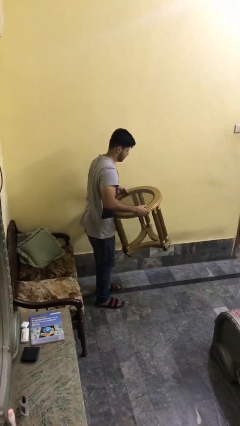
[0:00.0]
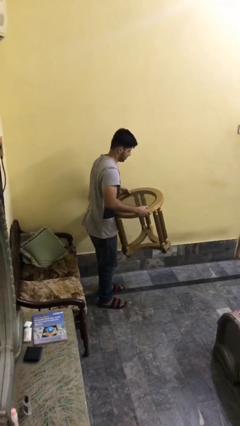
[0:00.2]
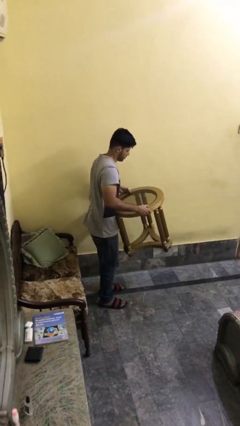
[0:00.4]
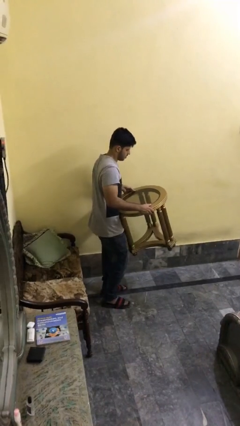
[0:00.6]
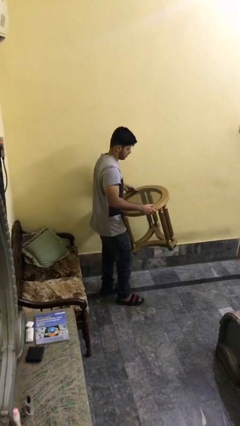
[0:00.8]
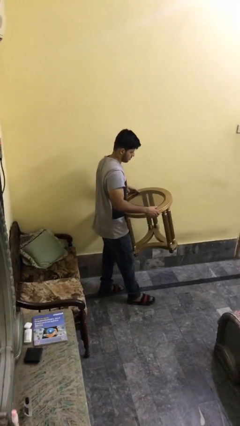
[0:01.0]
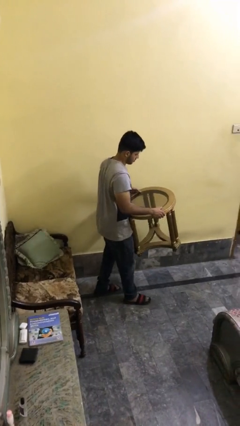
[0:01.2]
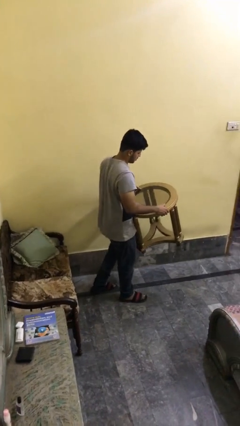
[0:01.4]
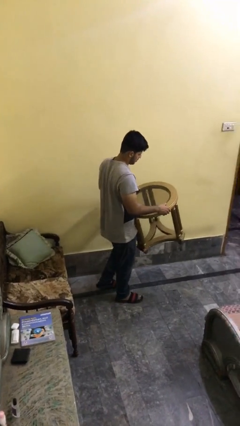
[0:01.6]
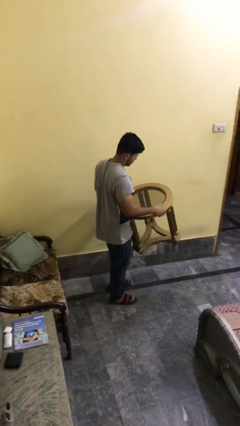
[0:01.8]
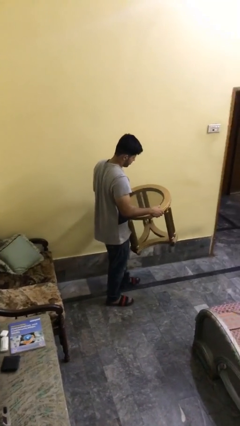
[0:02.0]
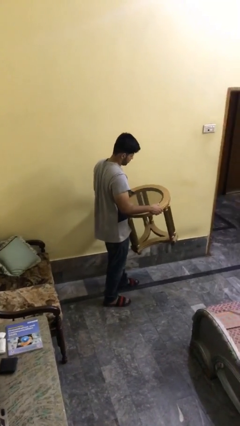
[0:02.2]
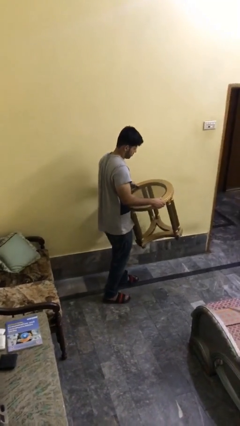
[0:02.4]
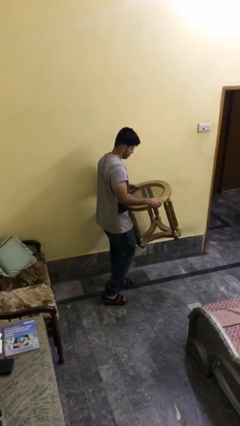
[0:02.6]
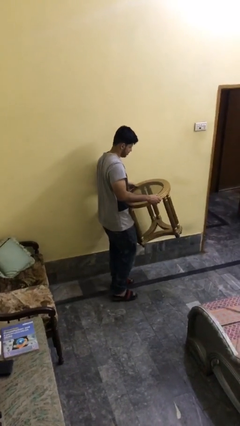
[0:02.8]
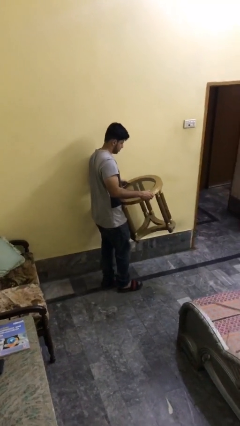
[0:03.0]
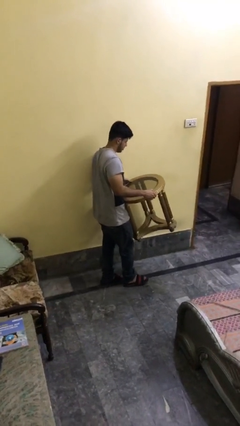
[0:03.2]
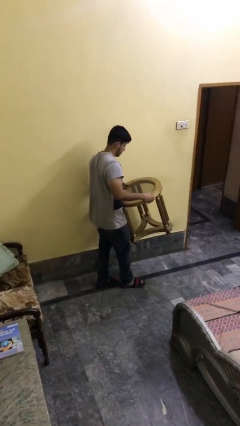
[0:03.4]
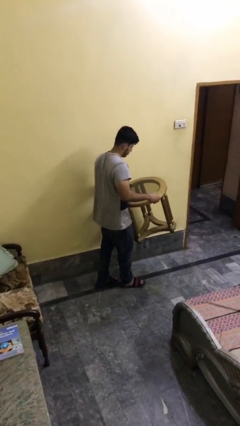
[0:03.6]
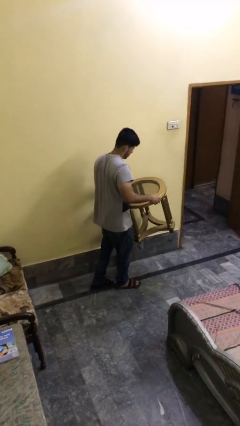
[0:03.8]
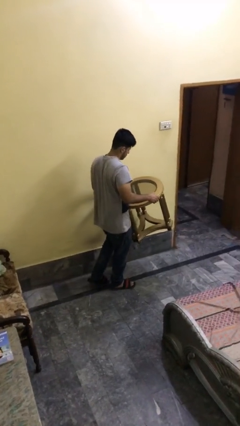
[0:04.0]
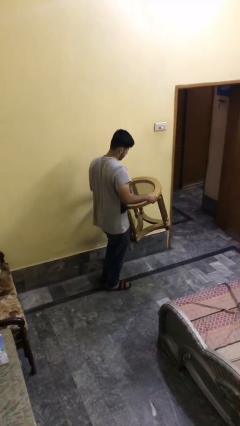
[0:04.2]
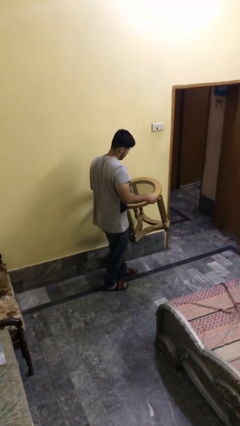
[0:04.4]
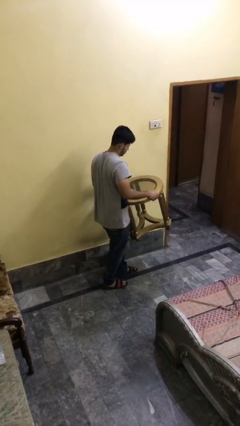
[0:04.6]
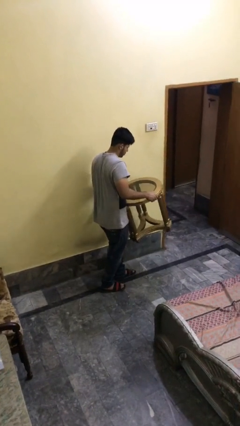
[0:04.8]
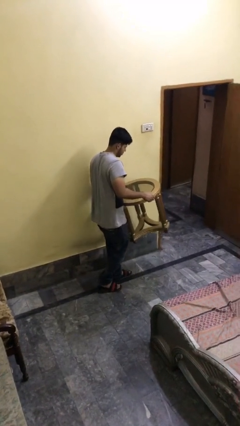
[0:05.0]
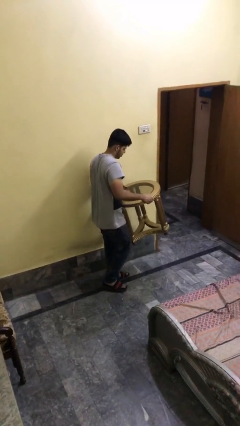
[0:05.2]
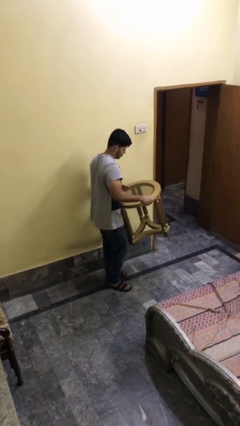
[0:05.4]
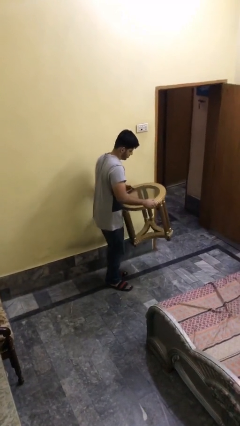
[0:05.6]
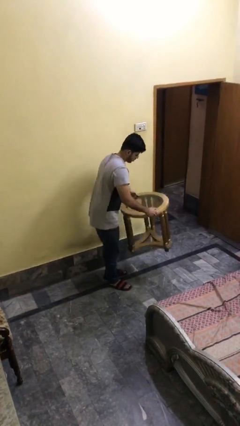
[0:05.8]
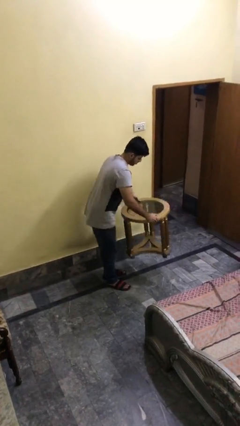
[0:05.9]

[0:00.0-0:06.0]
person carries heavy object

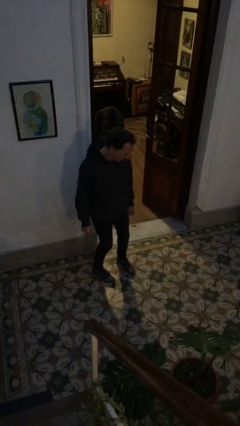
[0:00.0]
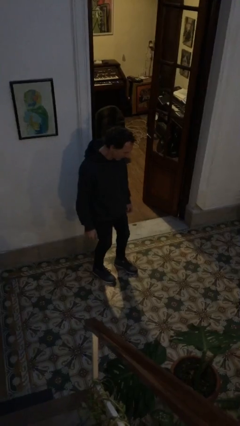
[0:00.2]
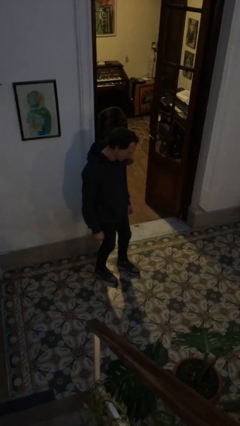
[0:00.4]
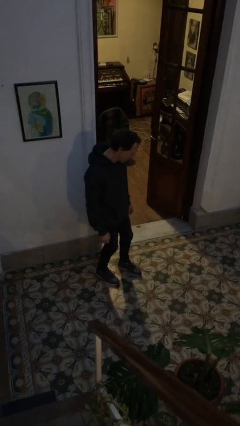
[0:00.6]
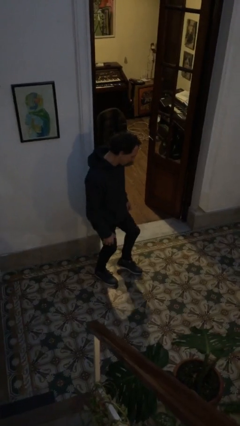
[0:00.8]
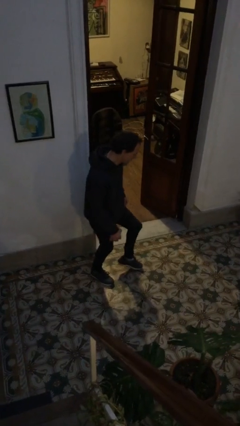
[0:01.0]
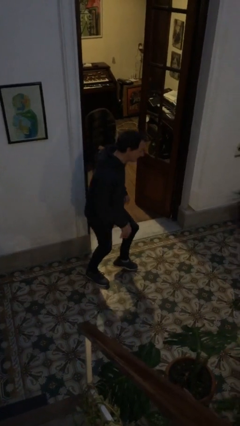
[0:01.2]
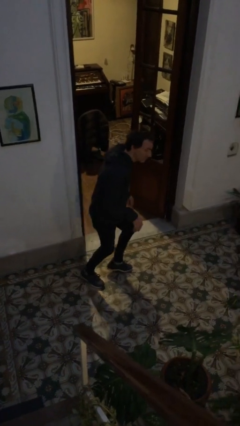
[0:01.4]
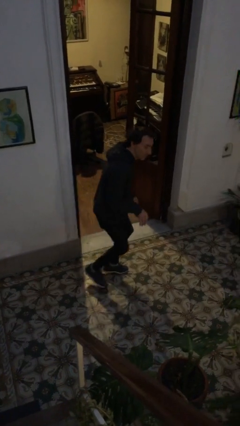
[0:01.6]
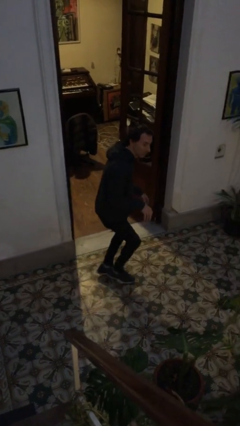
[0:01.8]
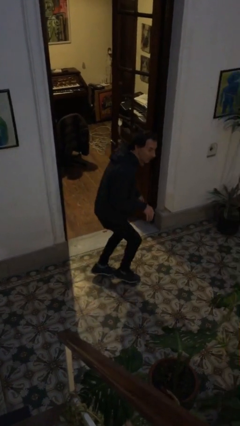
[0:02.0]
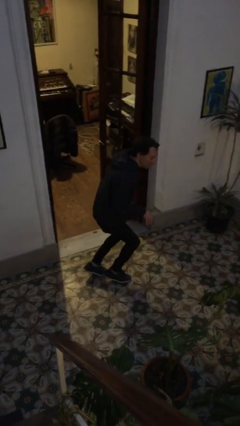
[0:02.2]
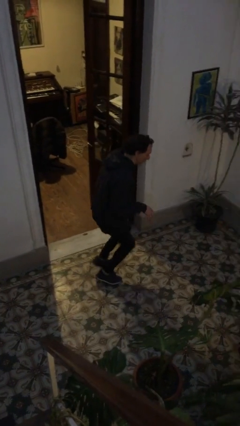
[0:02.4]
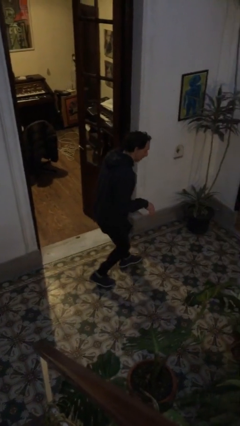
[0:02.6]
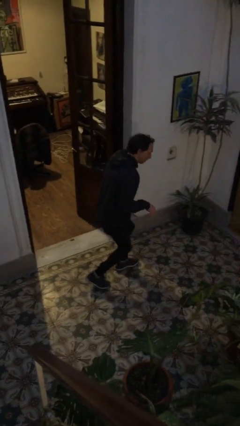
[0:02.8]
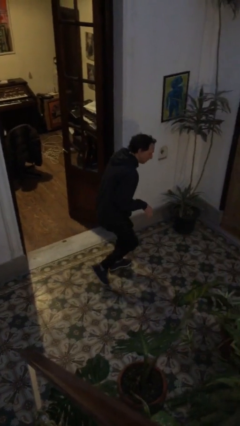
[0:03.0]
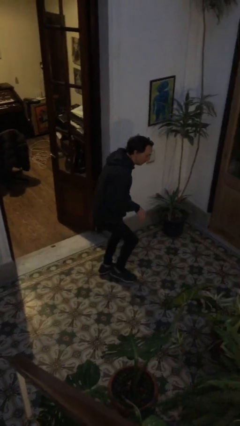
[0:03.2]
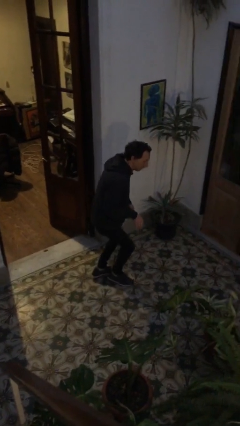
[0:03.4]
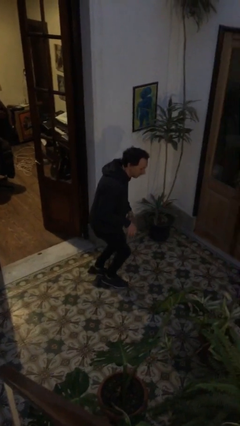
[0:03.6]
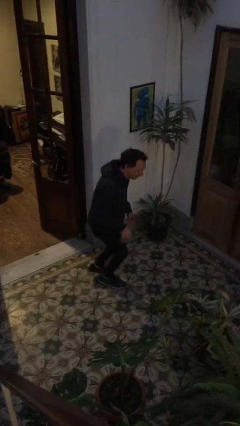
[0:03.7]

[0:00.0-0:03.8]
person walks tiptoe

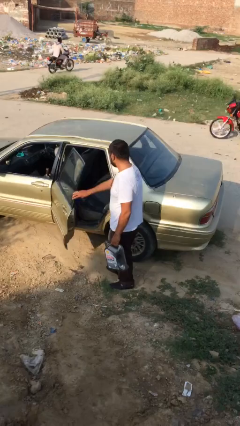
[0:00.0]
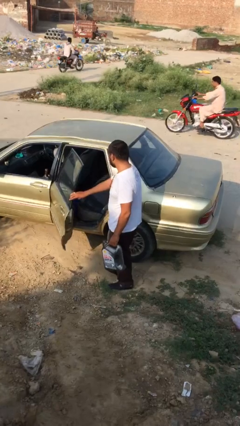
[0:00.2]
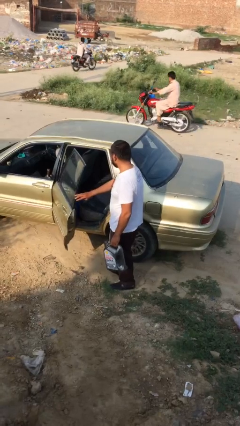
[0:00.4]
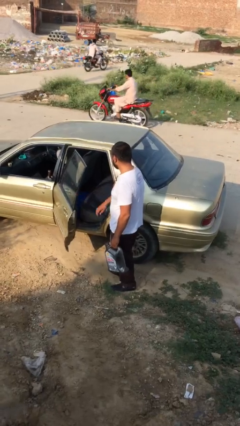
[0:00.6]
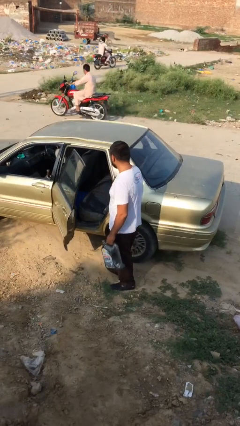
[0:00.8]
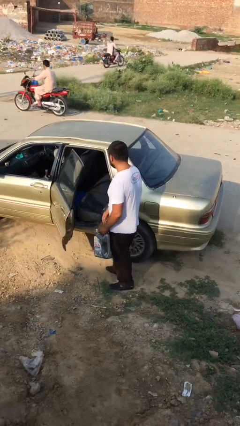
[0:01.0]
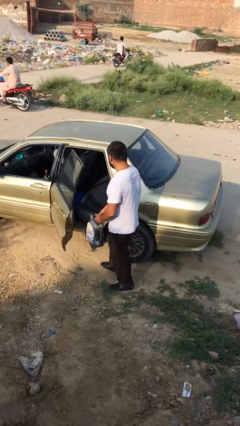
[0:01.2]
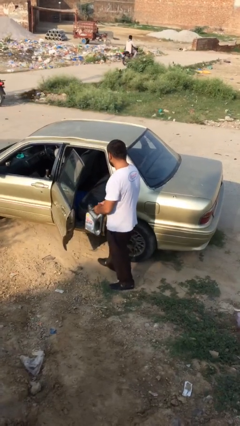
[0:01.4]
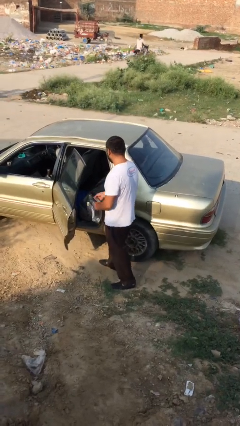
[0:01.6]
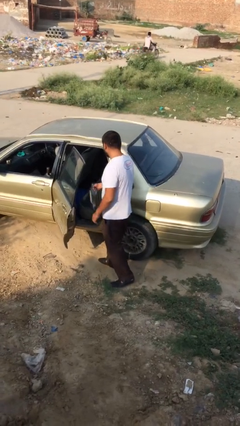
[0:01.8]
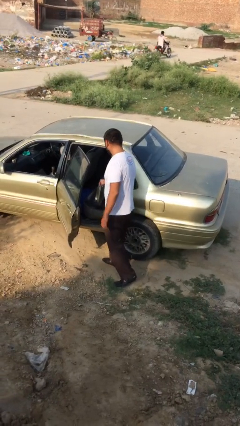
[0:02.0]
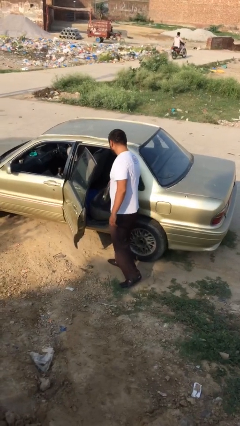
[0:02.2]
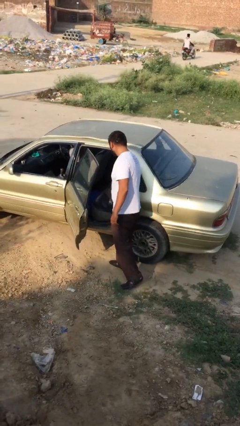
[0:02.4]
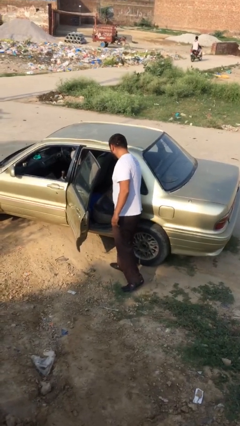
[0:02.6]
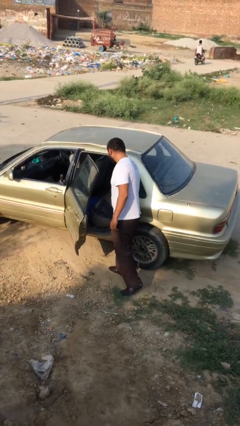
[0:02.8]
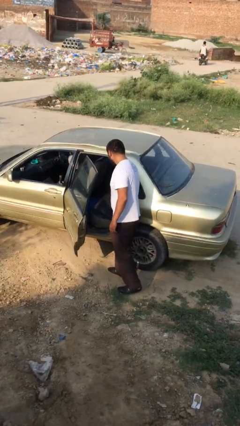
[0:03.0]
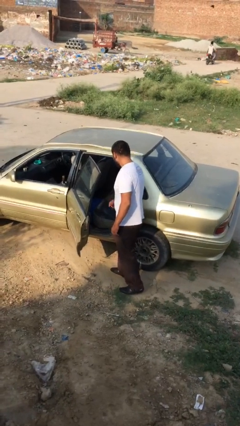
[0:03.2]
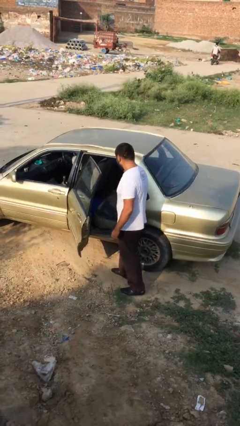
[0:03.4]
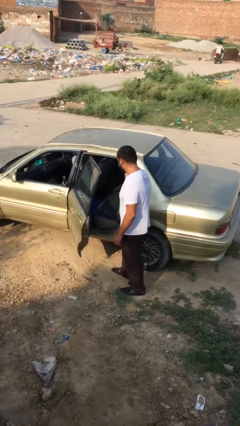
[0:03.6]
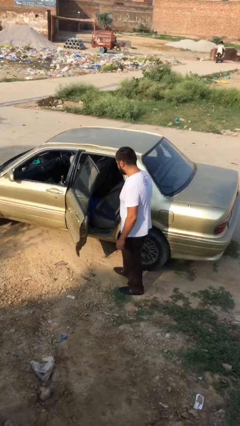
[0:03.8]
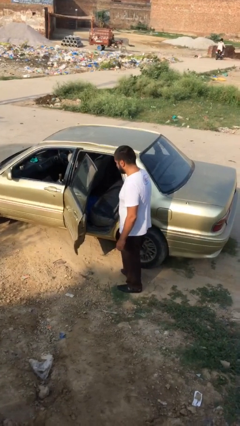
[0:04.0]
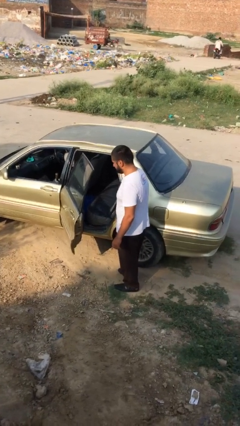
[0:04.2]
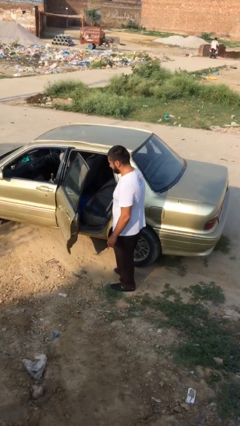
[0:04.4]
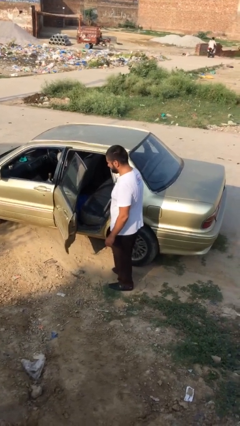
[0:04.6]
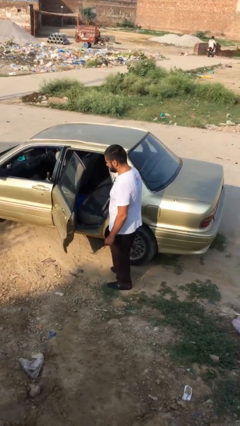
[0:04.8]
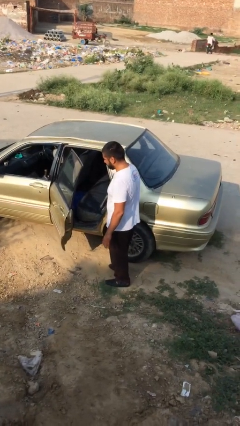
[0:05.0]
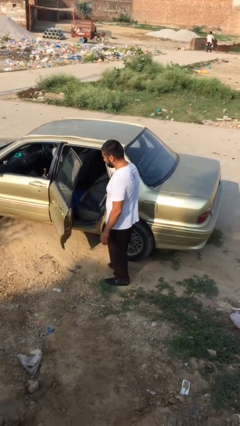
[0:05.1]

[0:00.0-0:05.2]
person loads car

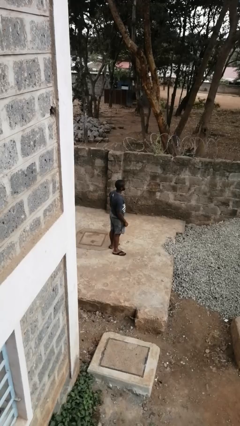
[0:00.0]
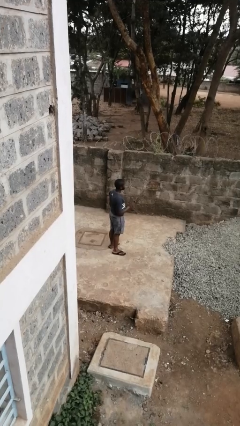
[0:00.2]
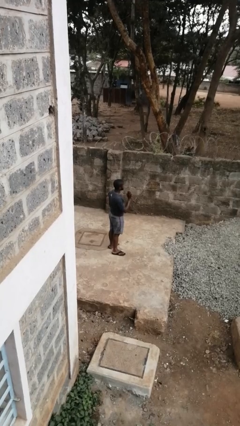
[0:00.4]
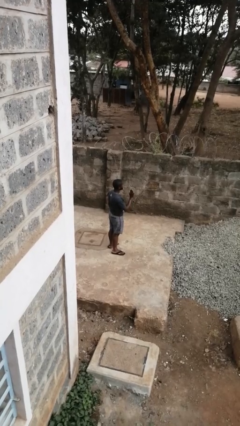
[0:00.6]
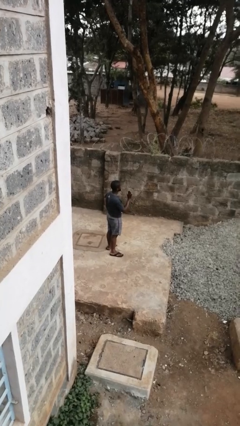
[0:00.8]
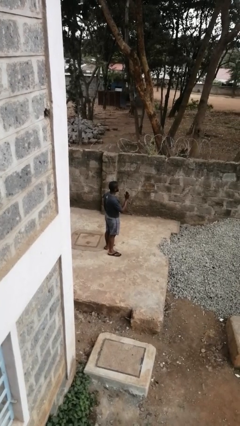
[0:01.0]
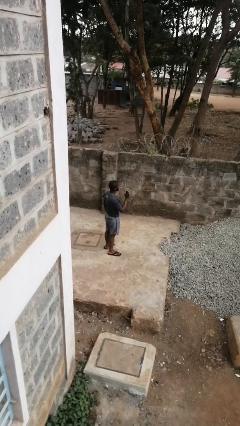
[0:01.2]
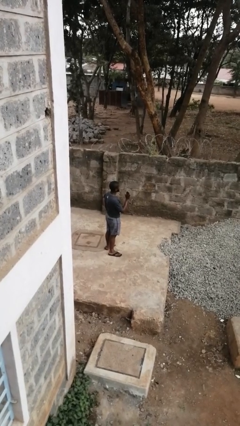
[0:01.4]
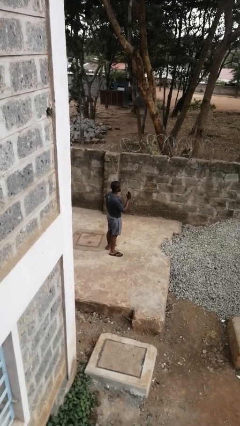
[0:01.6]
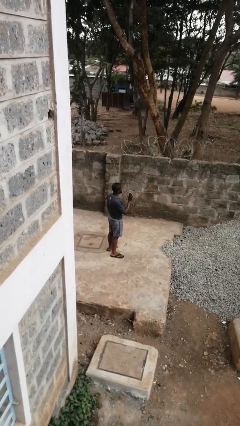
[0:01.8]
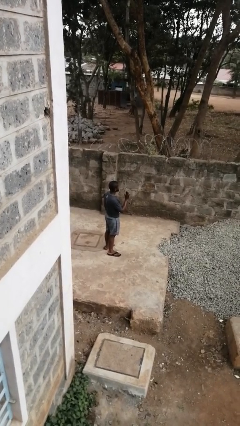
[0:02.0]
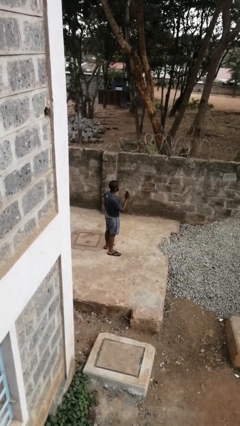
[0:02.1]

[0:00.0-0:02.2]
person gestures stop

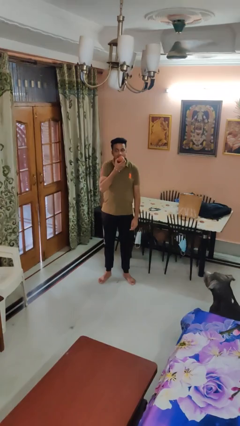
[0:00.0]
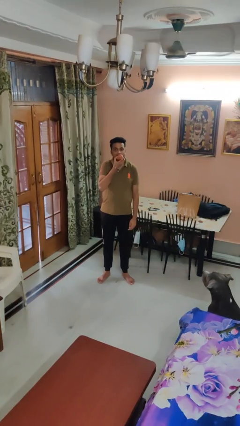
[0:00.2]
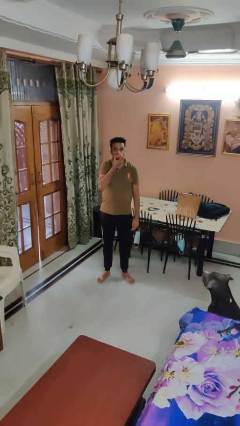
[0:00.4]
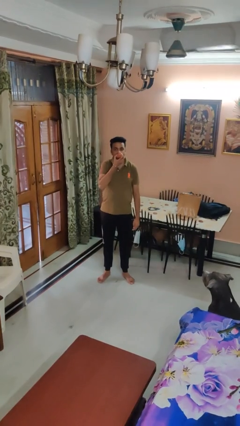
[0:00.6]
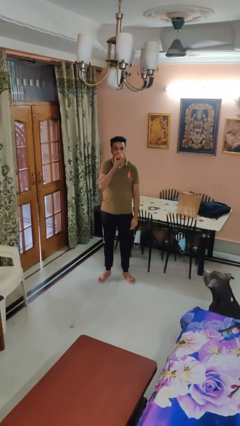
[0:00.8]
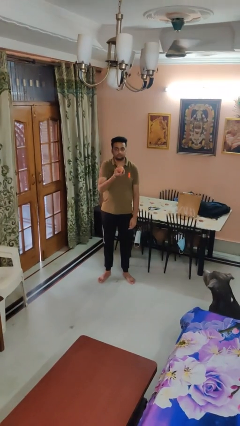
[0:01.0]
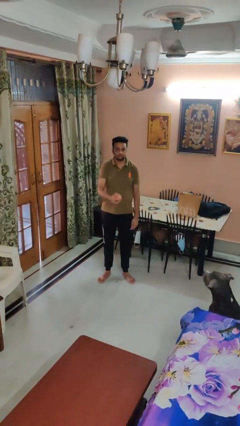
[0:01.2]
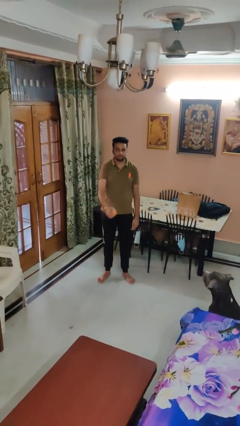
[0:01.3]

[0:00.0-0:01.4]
person eats apple
